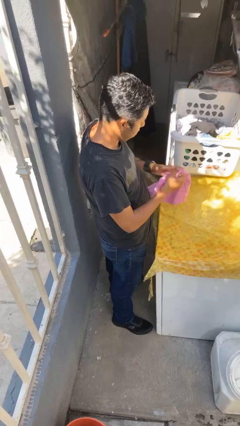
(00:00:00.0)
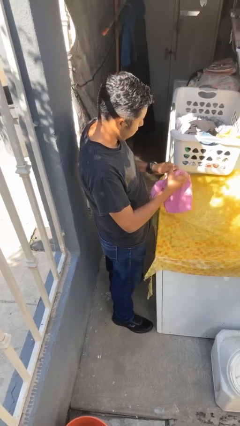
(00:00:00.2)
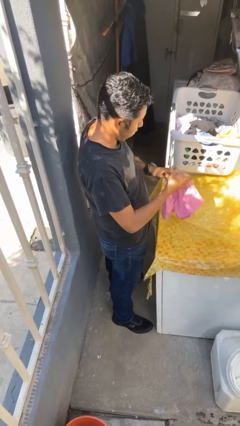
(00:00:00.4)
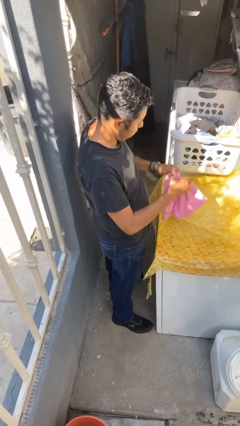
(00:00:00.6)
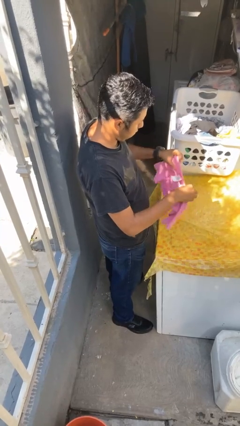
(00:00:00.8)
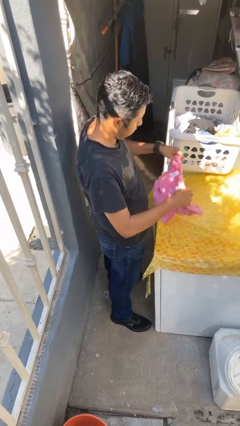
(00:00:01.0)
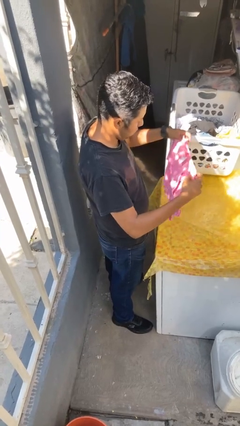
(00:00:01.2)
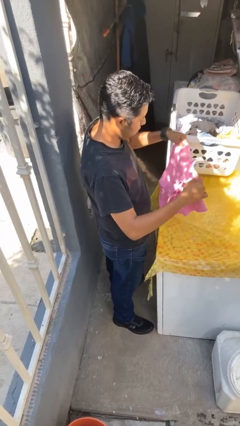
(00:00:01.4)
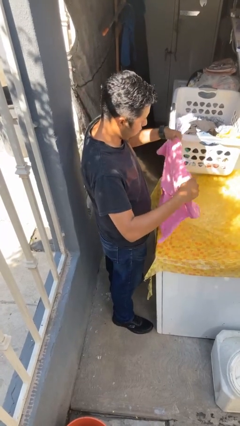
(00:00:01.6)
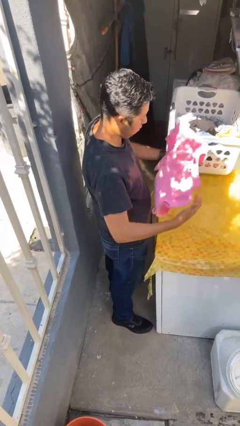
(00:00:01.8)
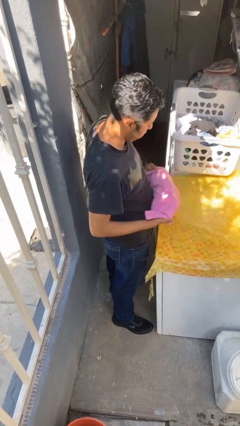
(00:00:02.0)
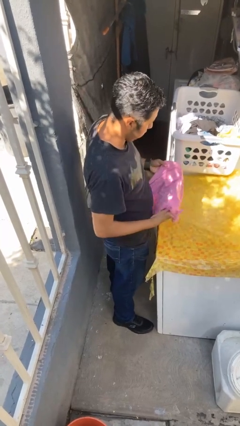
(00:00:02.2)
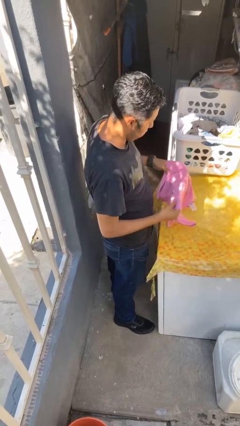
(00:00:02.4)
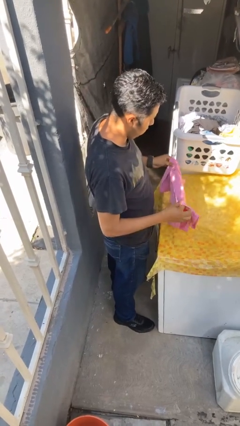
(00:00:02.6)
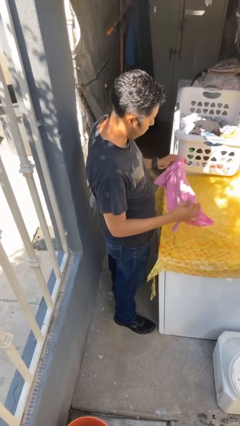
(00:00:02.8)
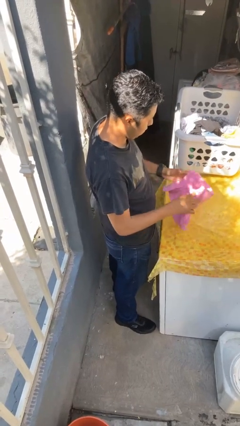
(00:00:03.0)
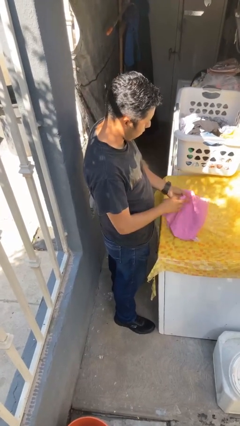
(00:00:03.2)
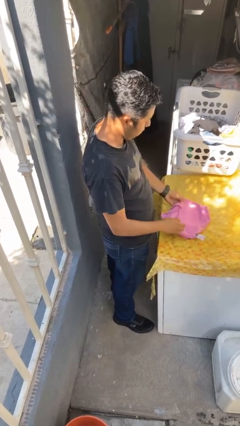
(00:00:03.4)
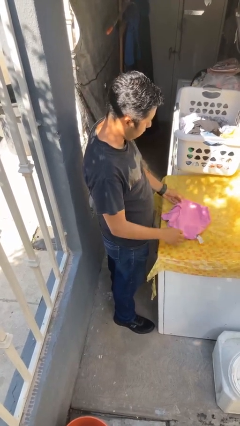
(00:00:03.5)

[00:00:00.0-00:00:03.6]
person folds shirt

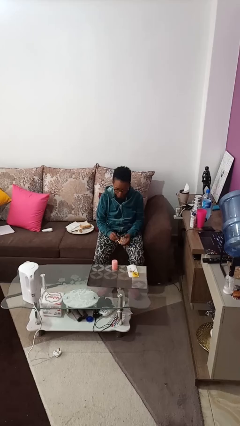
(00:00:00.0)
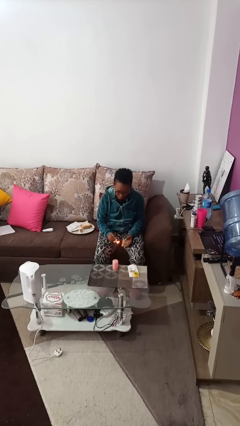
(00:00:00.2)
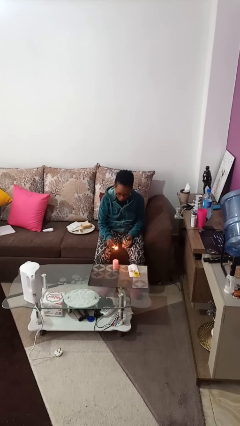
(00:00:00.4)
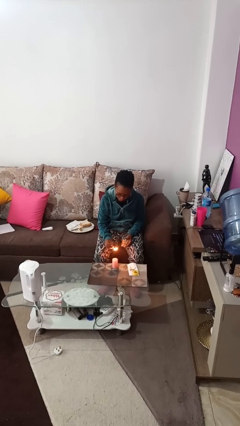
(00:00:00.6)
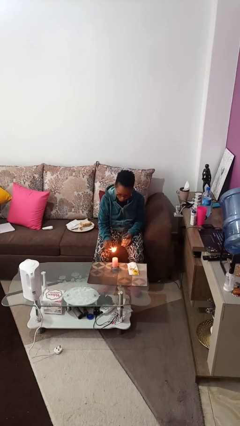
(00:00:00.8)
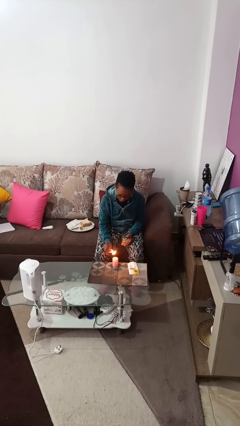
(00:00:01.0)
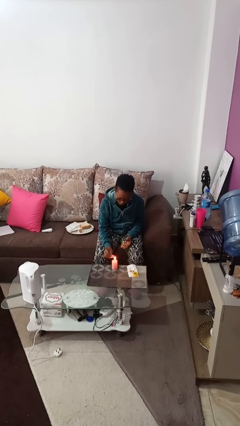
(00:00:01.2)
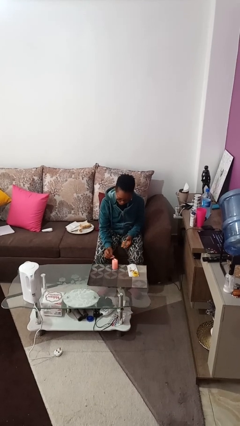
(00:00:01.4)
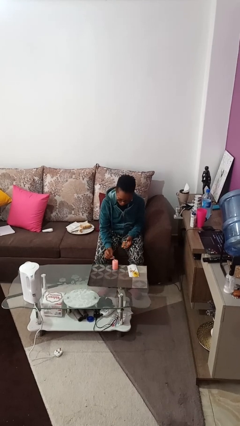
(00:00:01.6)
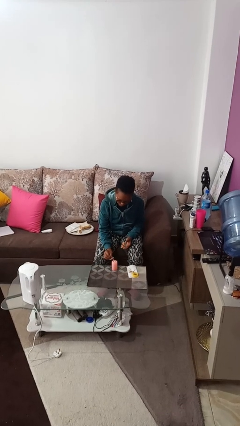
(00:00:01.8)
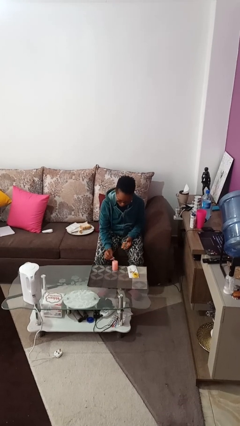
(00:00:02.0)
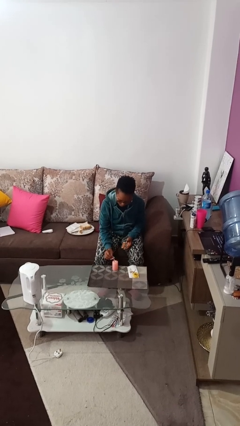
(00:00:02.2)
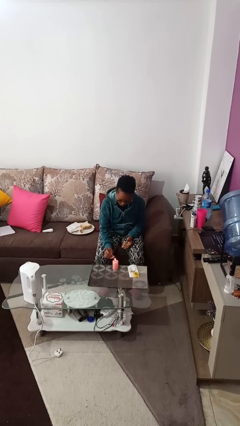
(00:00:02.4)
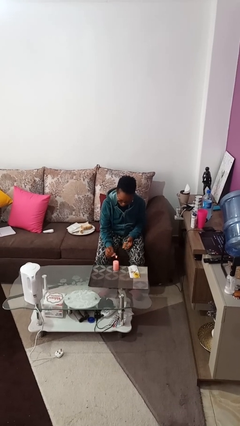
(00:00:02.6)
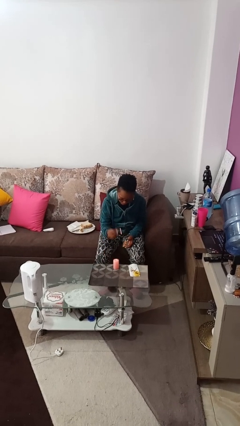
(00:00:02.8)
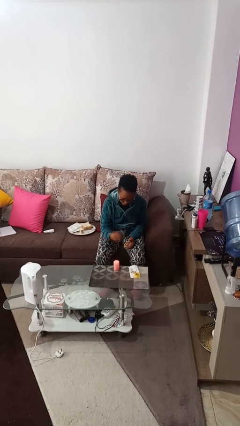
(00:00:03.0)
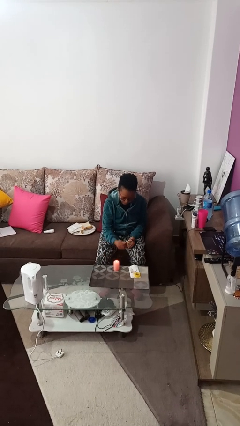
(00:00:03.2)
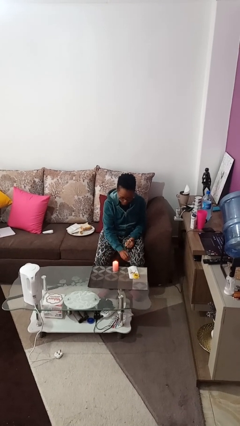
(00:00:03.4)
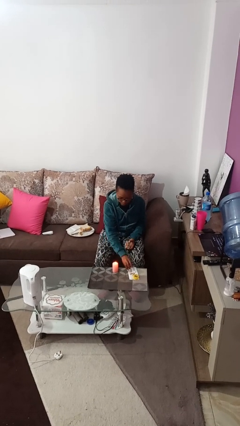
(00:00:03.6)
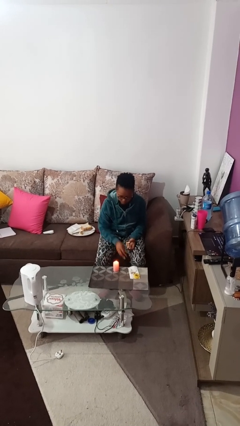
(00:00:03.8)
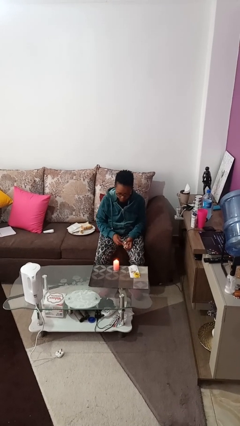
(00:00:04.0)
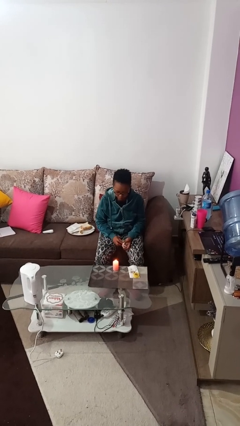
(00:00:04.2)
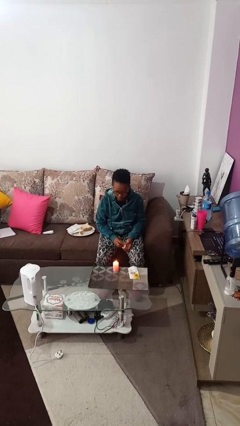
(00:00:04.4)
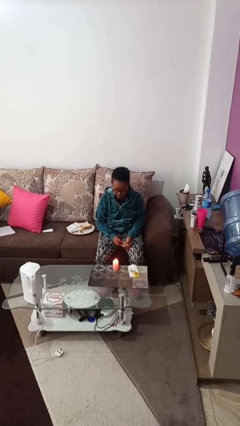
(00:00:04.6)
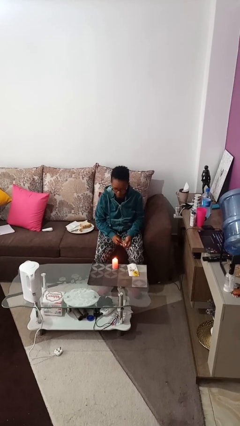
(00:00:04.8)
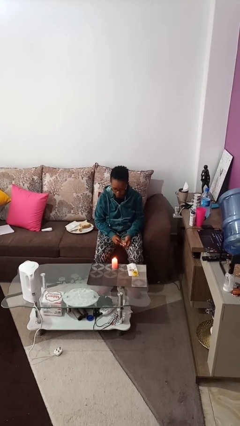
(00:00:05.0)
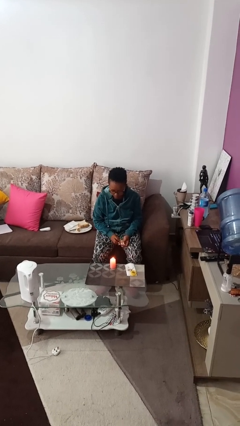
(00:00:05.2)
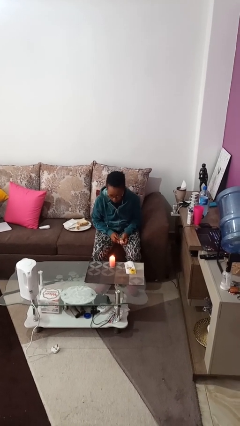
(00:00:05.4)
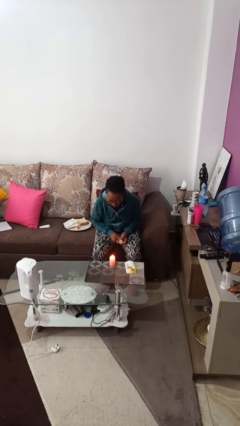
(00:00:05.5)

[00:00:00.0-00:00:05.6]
person lights candle

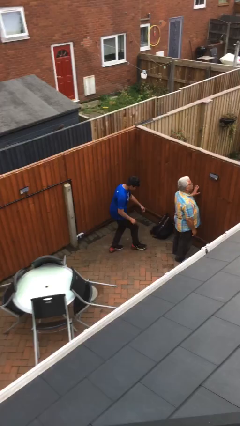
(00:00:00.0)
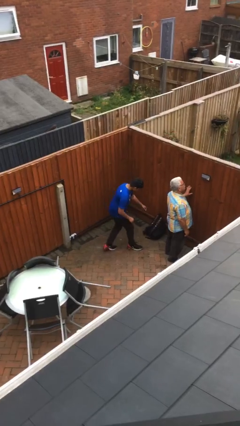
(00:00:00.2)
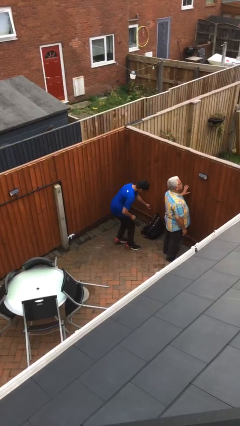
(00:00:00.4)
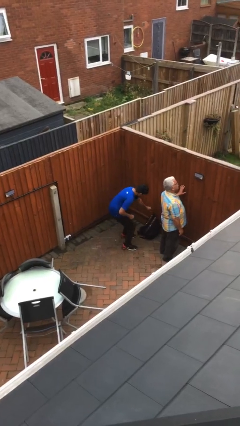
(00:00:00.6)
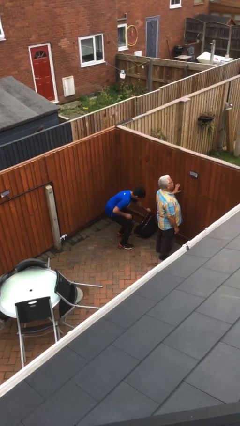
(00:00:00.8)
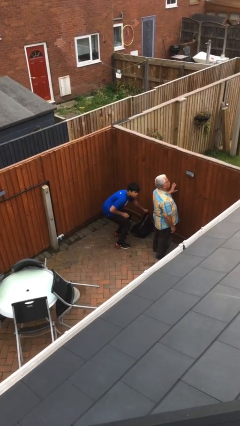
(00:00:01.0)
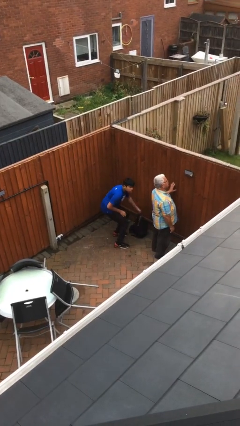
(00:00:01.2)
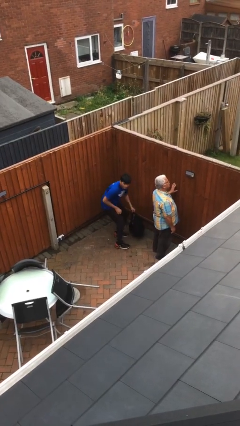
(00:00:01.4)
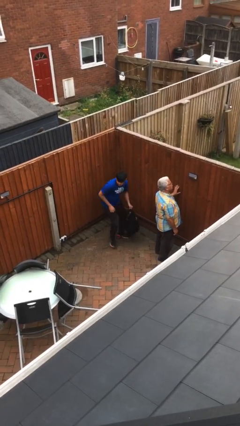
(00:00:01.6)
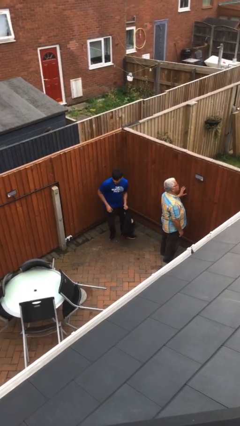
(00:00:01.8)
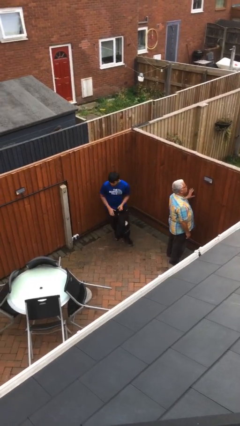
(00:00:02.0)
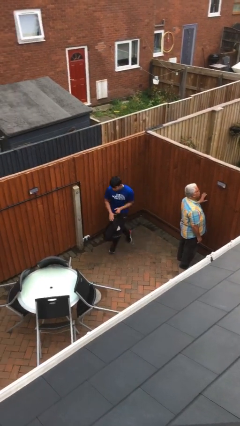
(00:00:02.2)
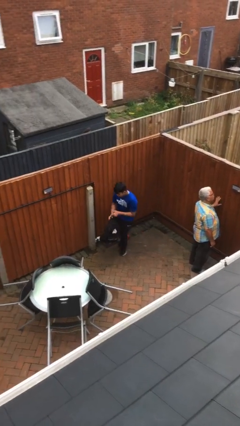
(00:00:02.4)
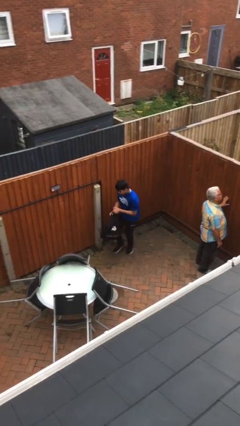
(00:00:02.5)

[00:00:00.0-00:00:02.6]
person steals object from person

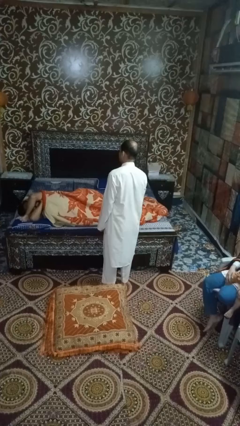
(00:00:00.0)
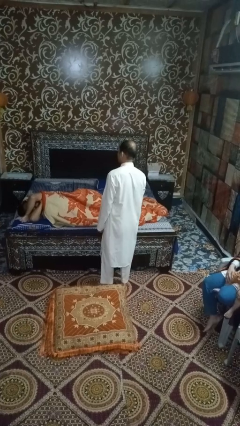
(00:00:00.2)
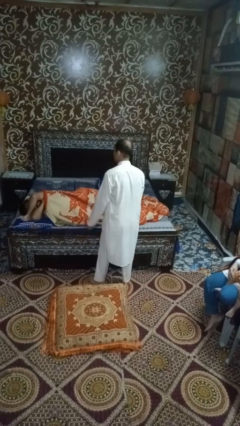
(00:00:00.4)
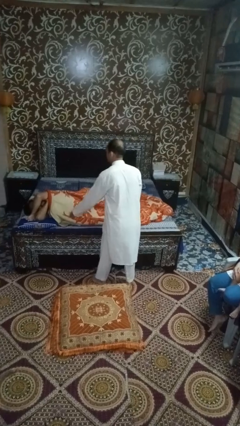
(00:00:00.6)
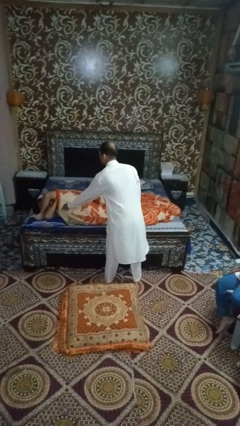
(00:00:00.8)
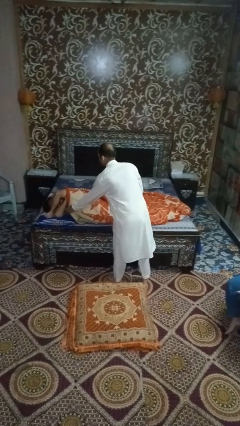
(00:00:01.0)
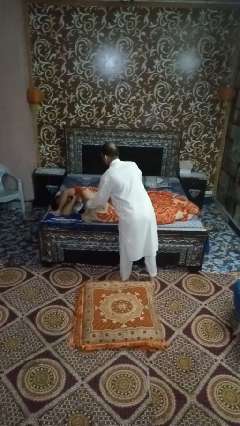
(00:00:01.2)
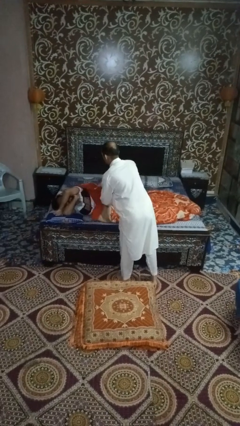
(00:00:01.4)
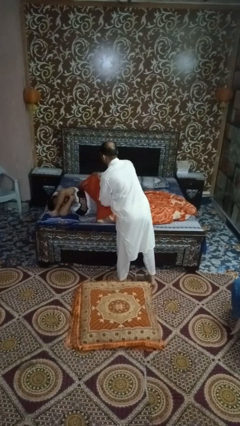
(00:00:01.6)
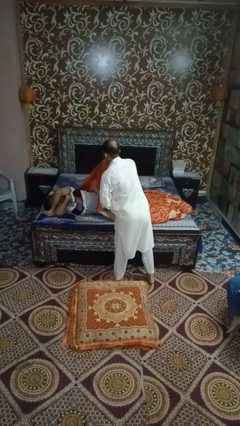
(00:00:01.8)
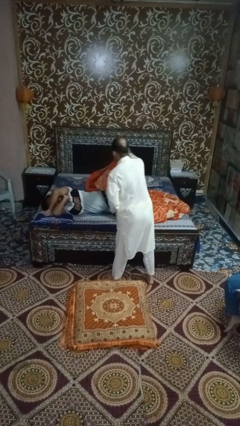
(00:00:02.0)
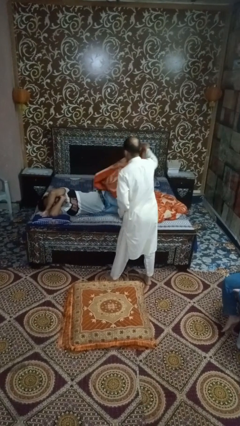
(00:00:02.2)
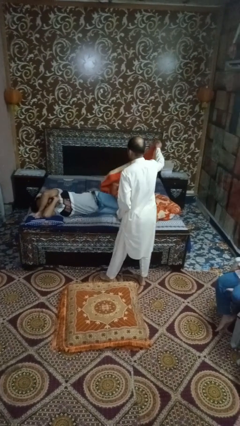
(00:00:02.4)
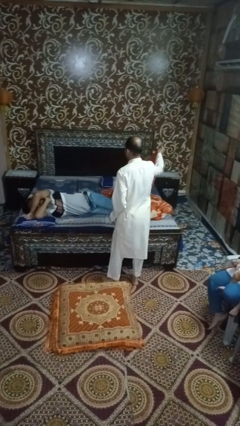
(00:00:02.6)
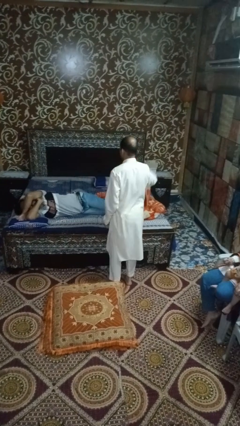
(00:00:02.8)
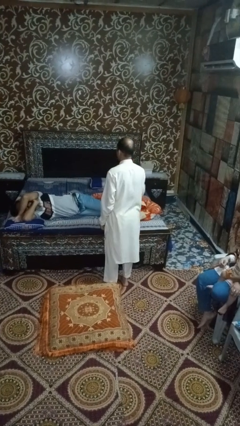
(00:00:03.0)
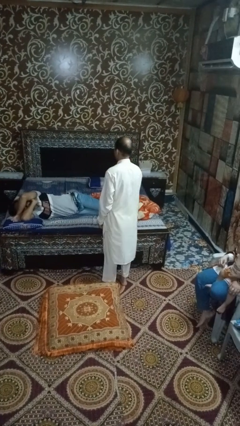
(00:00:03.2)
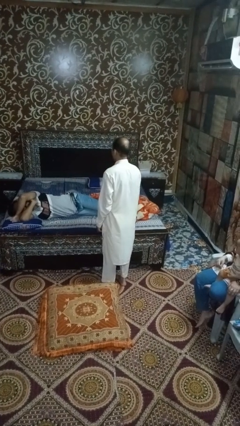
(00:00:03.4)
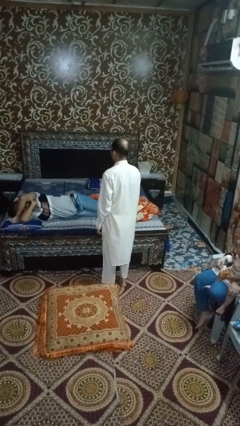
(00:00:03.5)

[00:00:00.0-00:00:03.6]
person uncovers friend with blanket

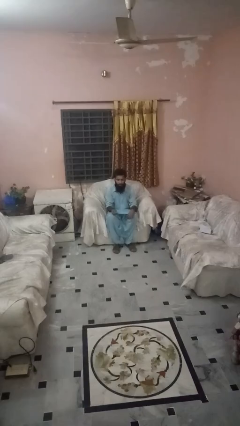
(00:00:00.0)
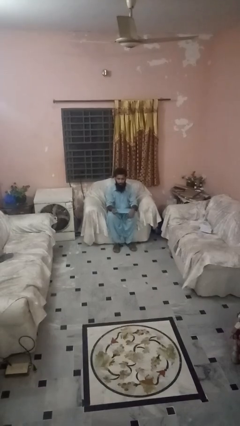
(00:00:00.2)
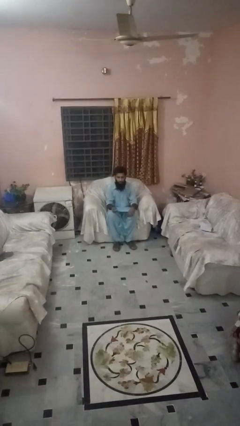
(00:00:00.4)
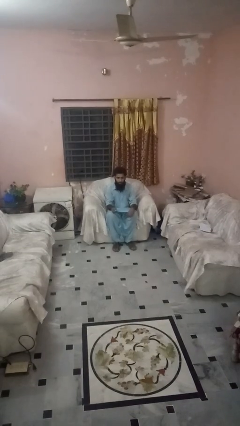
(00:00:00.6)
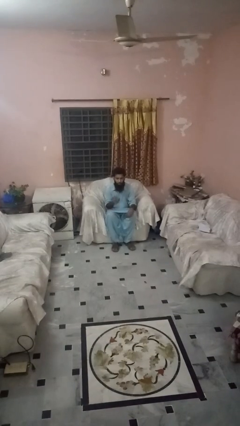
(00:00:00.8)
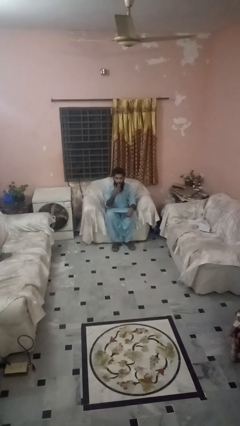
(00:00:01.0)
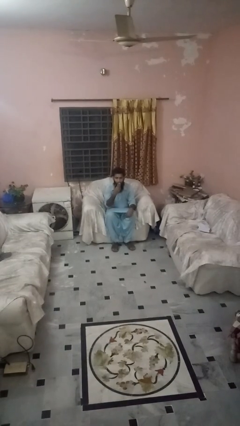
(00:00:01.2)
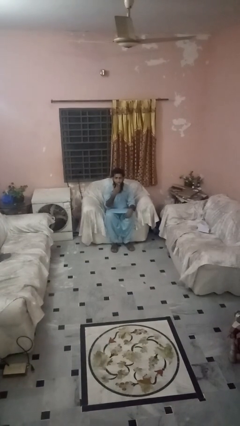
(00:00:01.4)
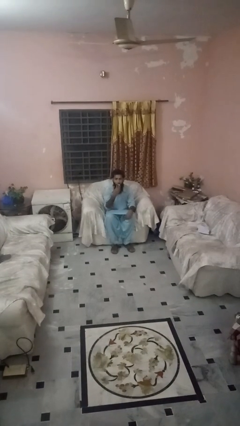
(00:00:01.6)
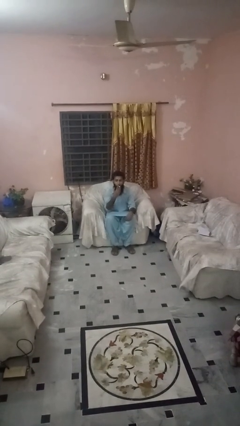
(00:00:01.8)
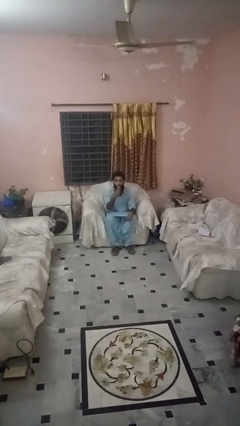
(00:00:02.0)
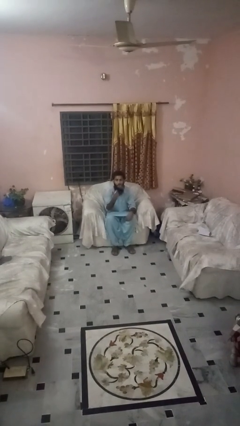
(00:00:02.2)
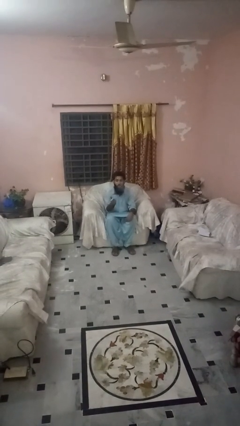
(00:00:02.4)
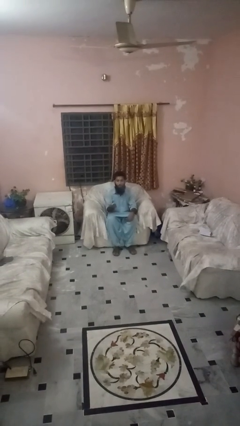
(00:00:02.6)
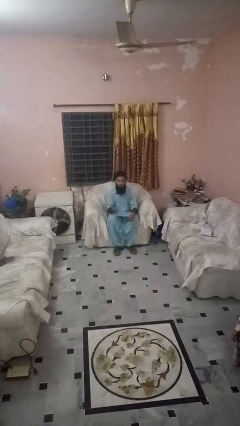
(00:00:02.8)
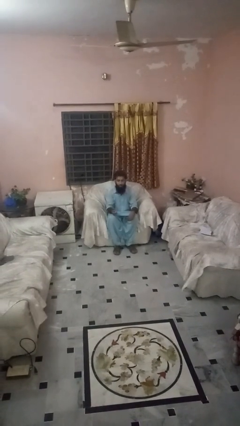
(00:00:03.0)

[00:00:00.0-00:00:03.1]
person vapes
